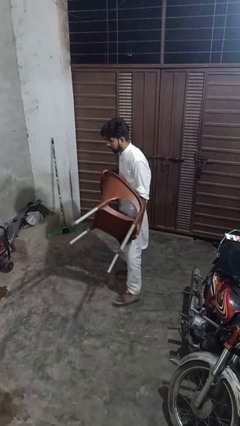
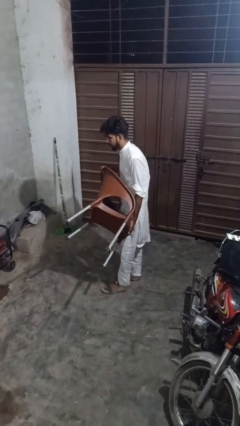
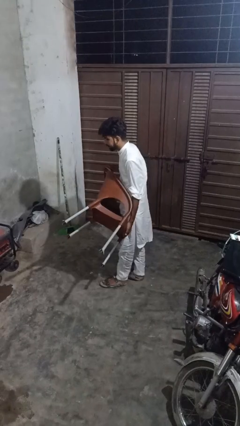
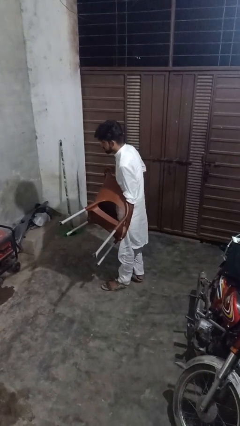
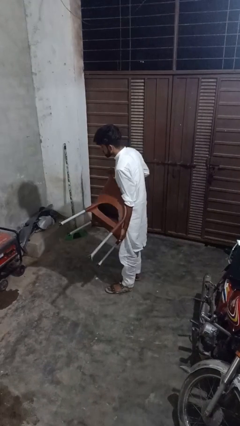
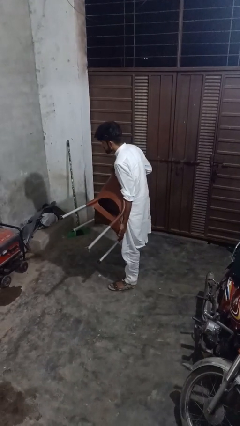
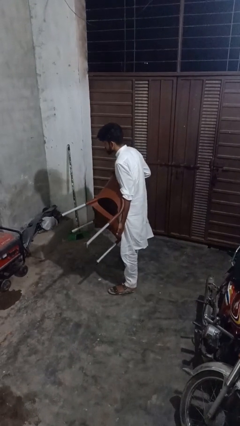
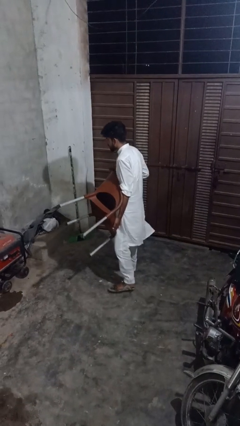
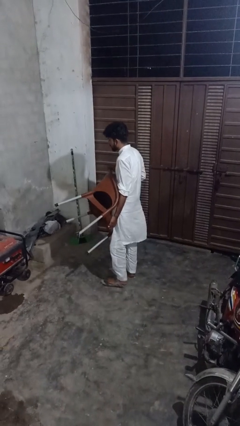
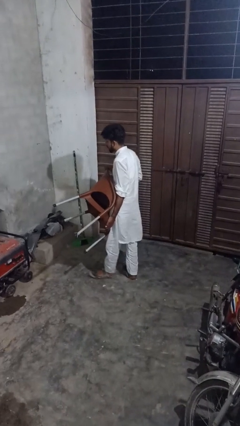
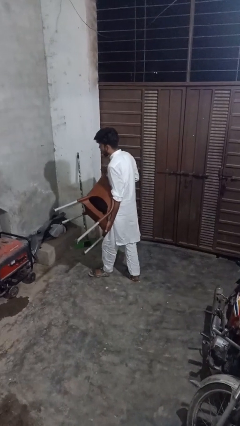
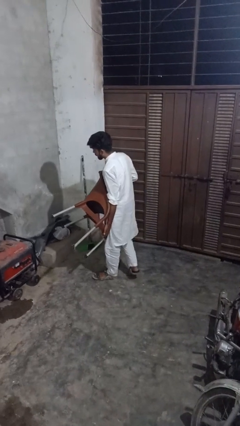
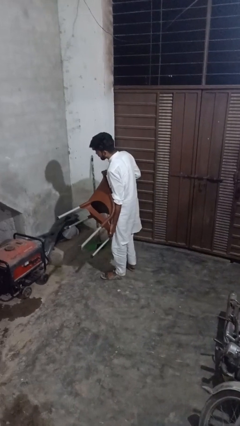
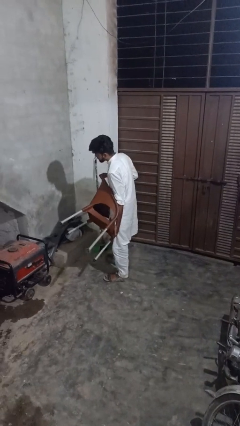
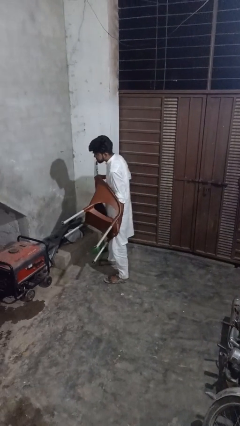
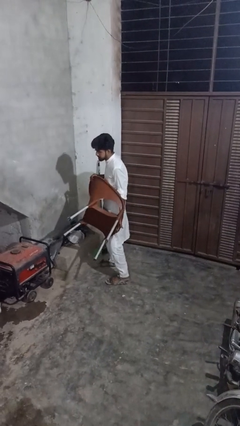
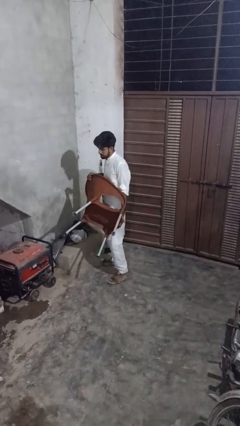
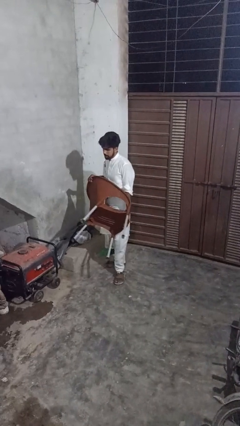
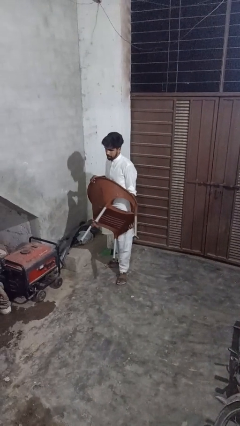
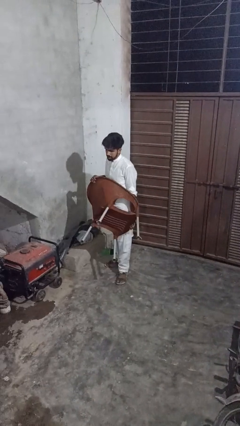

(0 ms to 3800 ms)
person carries furniture

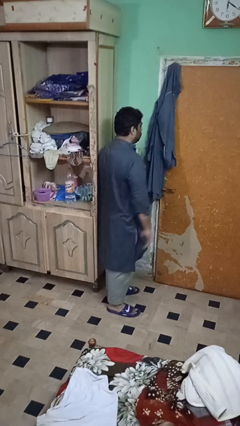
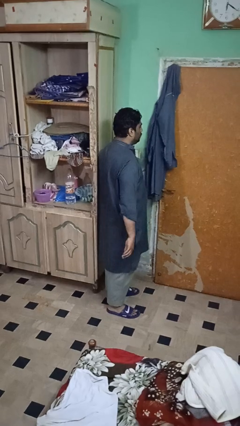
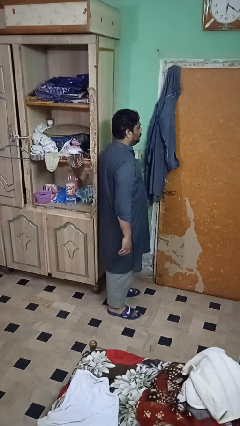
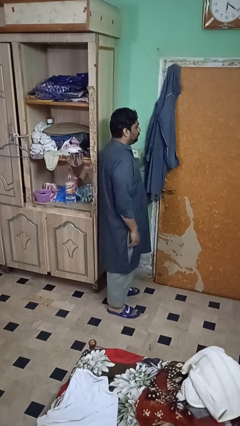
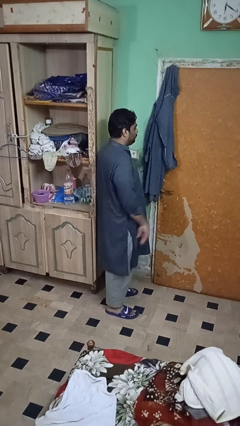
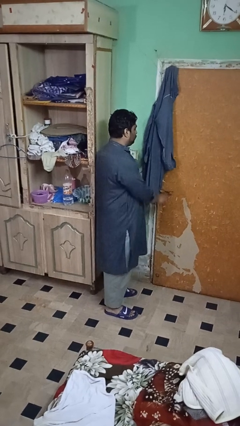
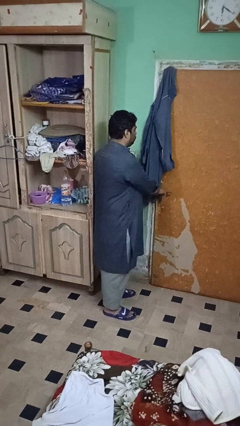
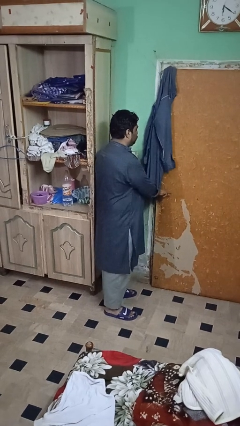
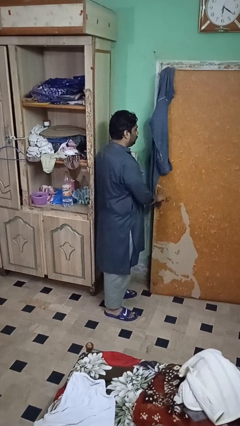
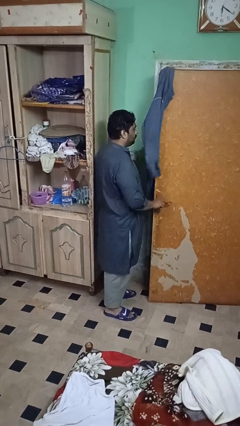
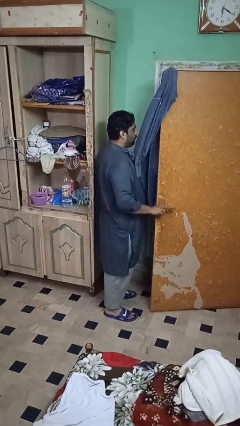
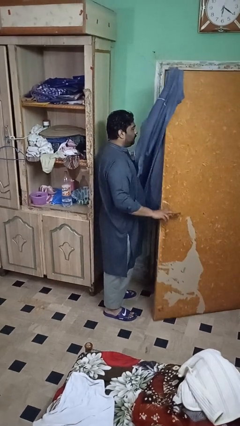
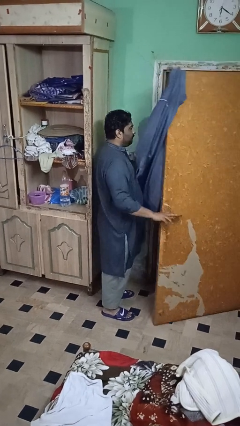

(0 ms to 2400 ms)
person opens closet door

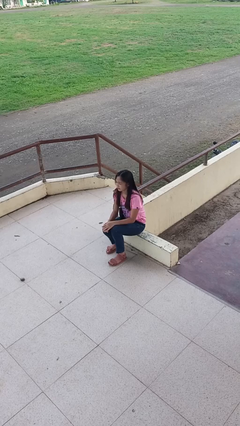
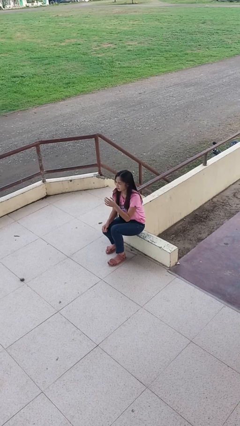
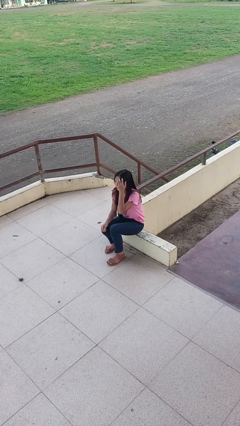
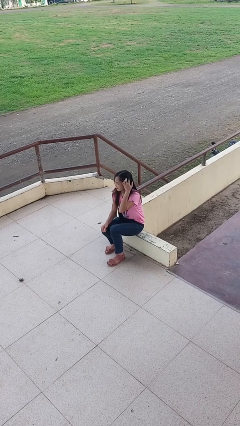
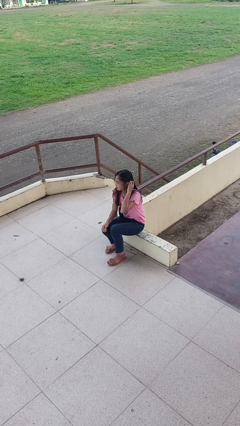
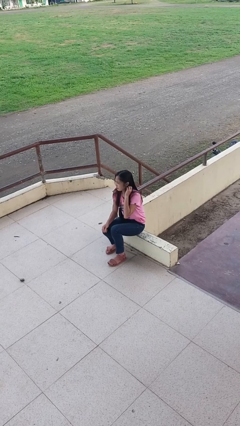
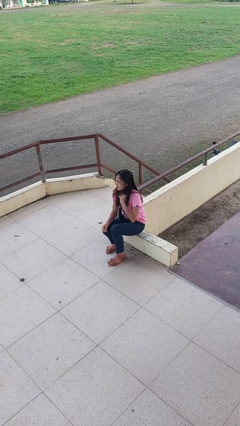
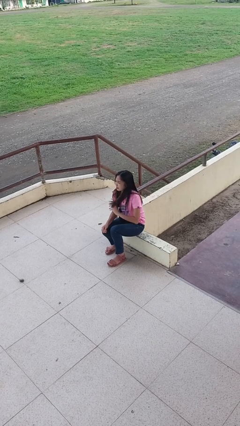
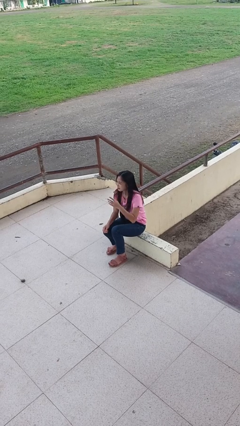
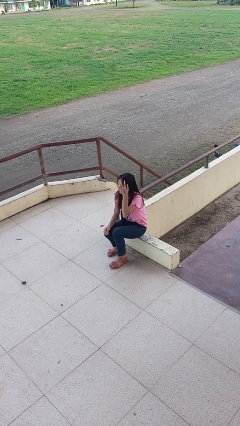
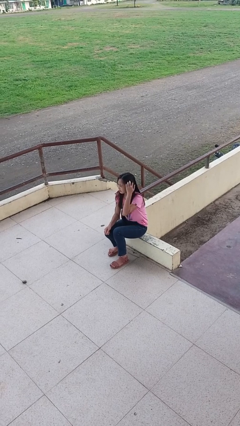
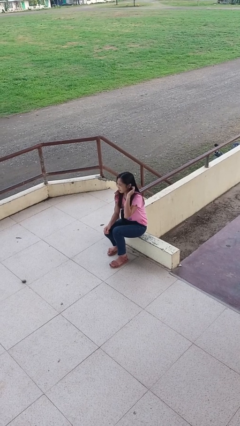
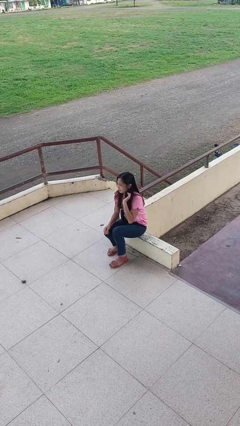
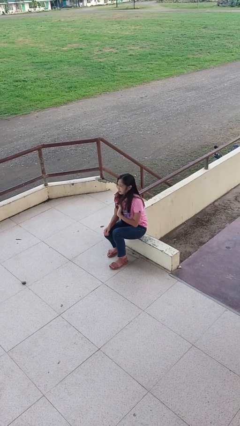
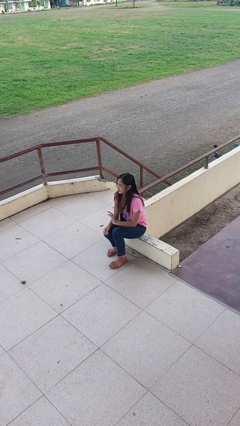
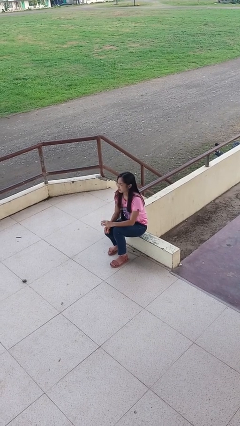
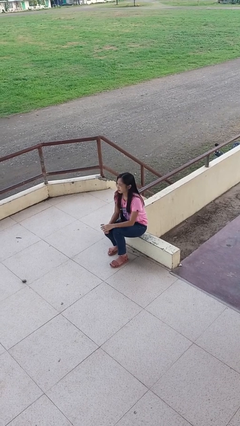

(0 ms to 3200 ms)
person strokes hair

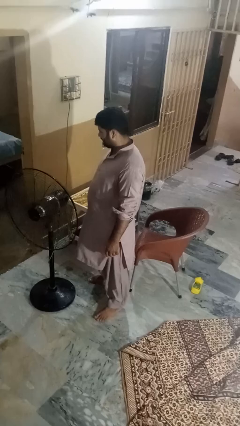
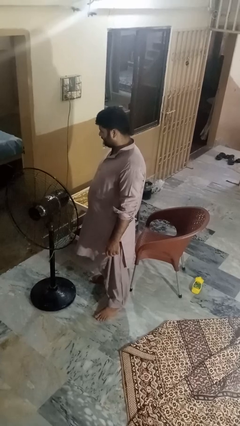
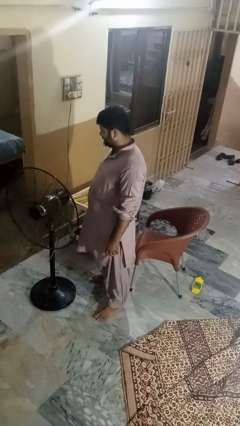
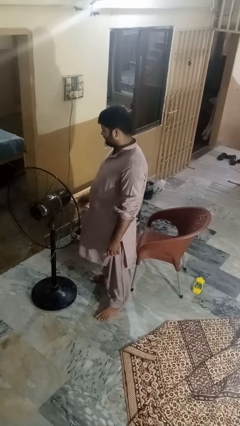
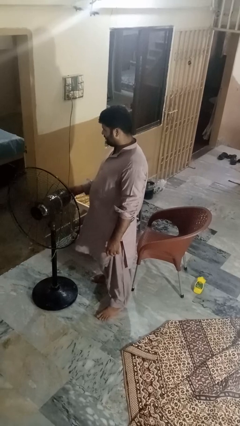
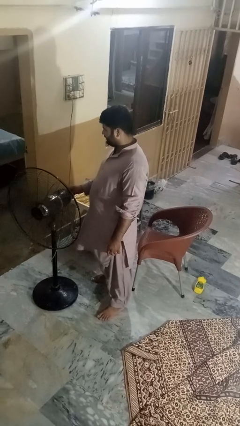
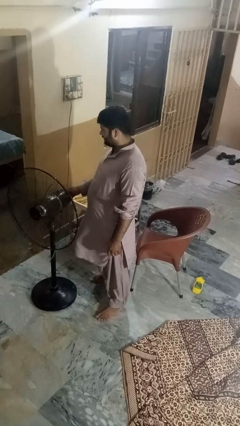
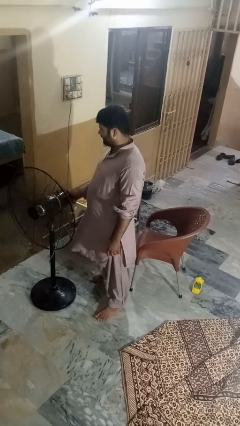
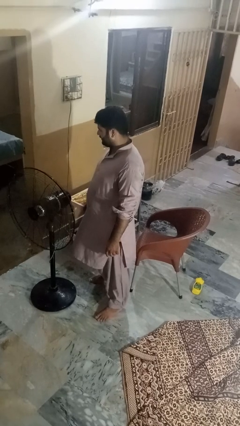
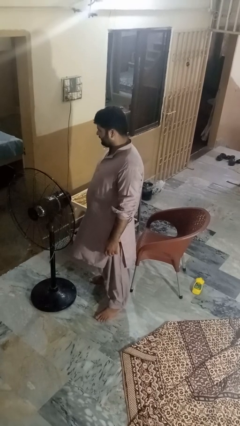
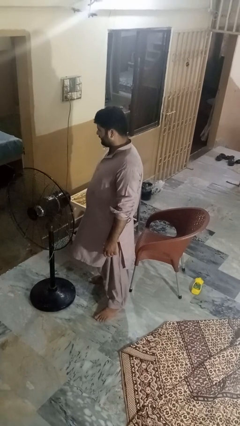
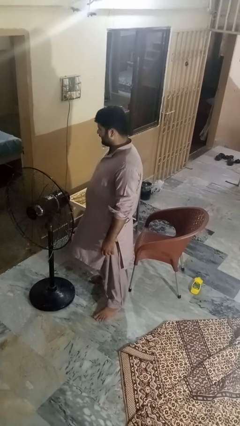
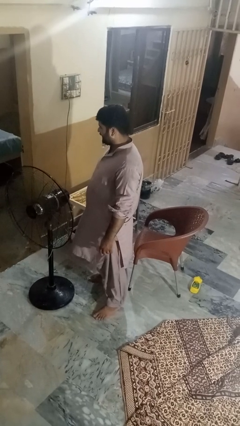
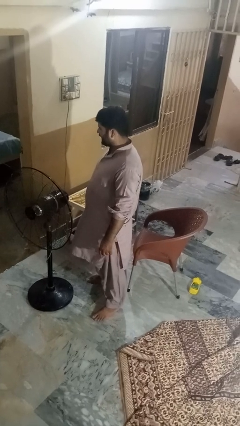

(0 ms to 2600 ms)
person turns on fan

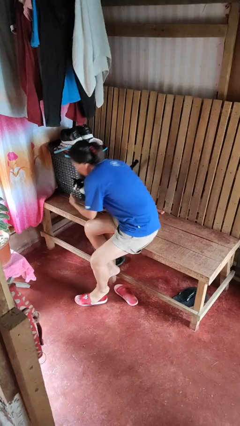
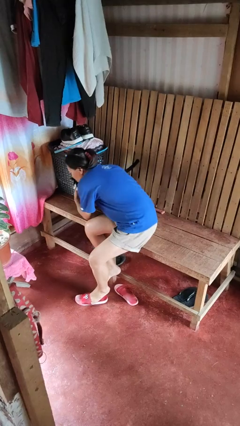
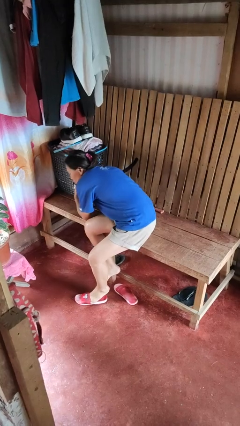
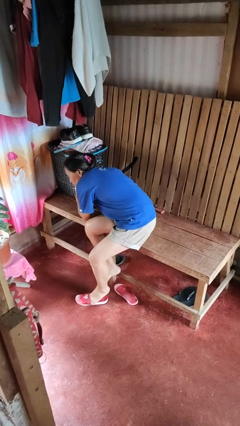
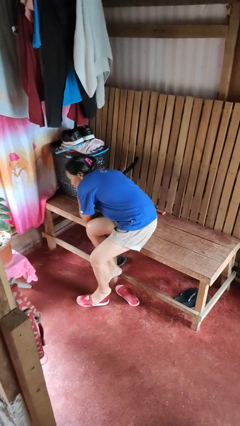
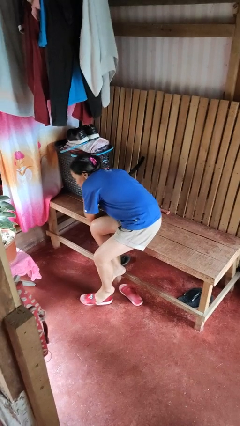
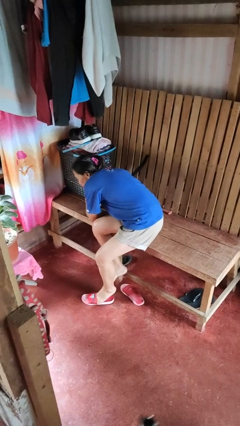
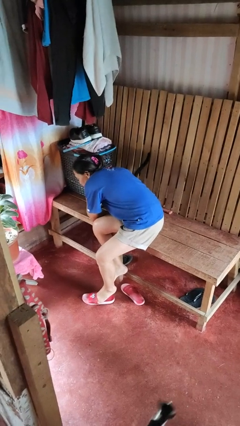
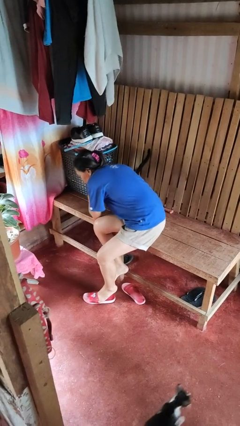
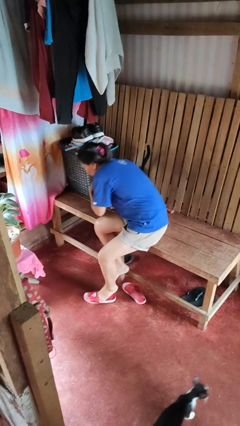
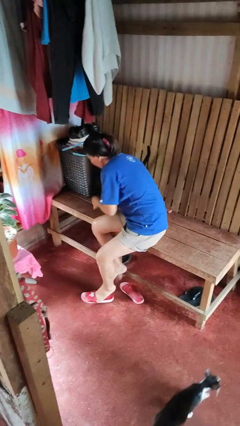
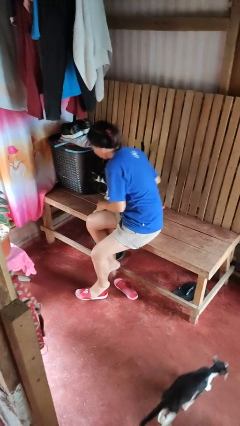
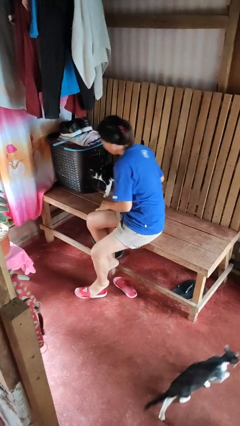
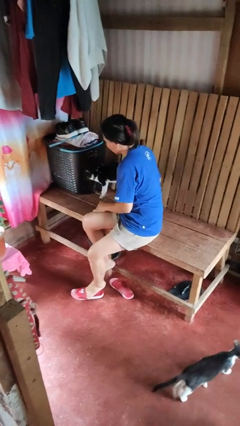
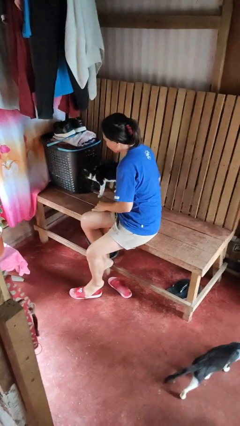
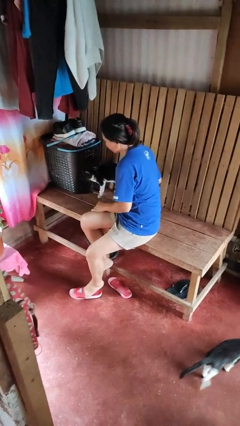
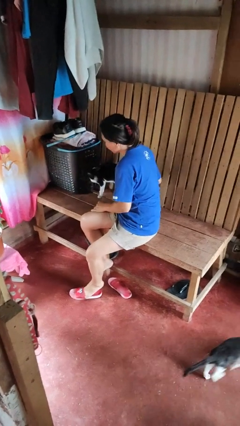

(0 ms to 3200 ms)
person hugs cat

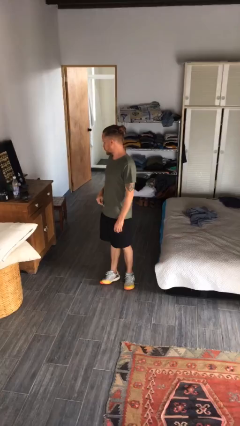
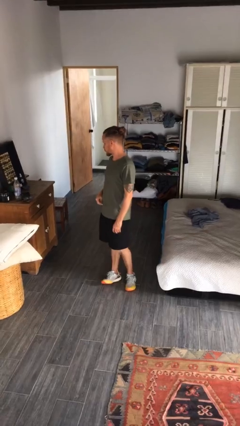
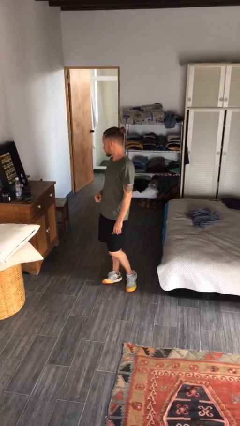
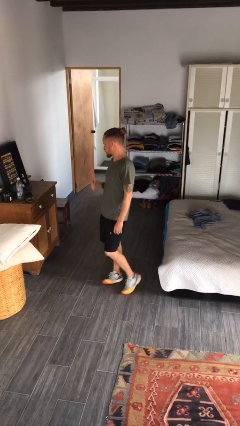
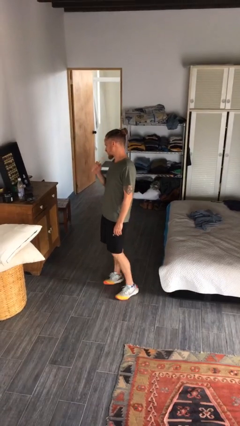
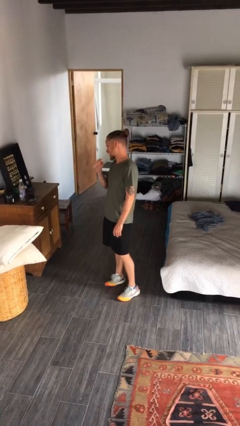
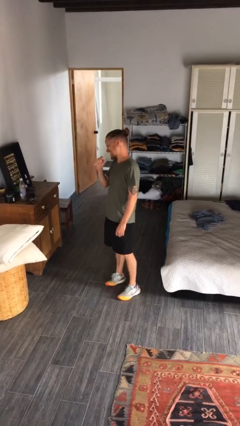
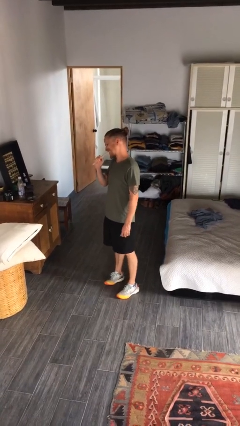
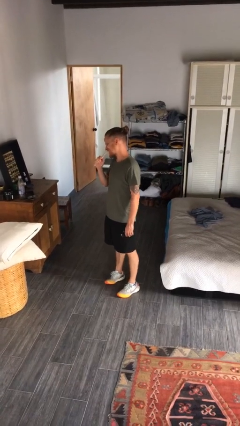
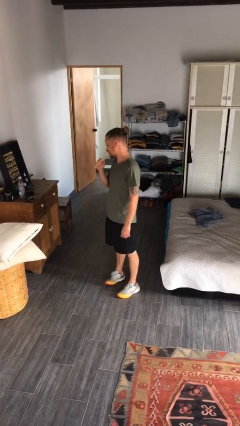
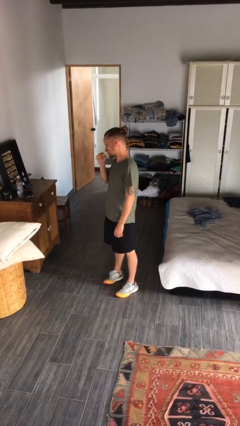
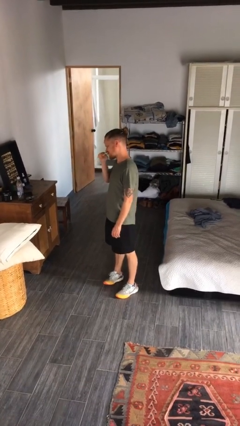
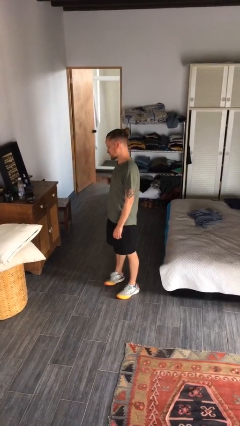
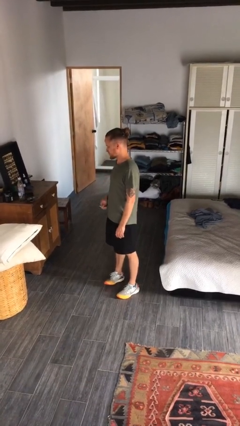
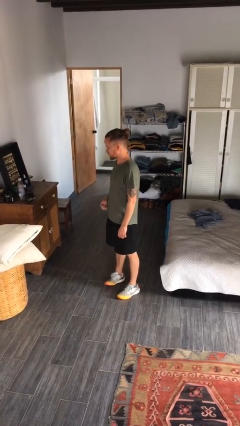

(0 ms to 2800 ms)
person brushes teeth
